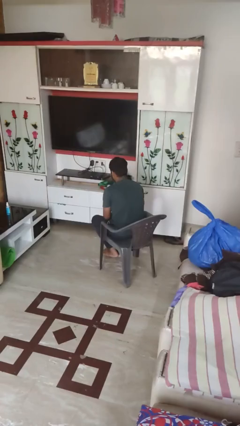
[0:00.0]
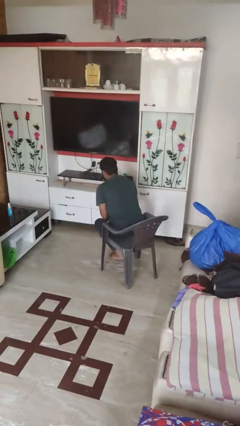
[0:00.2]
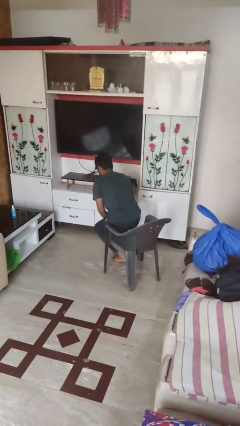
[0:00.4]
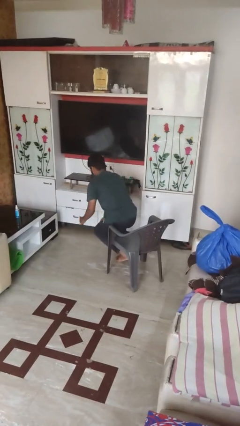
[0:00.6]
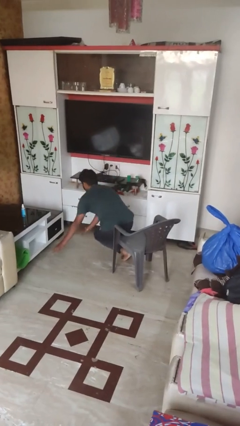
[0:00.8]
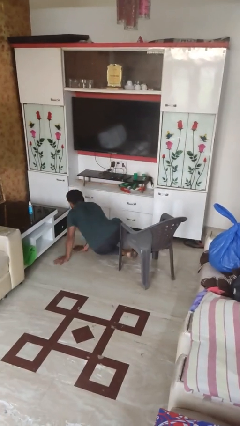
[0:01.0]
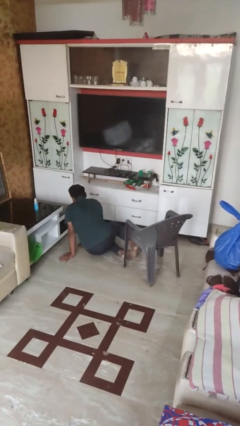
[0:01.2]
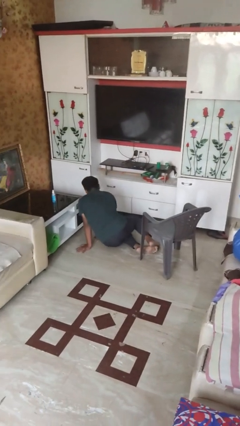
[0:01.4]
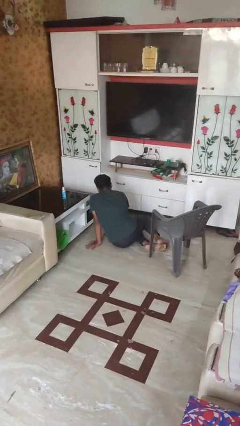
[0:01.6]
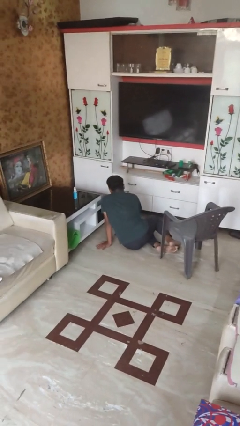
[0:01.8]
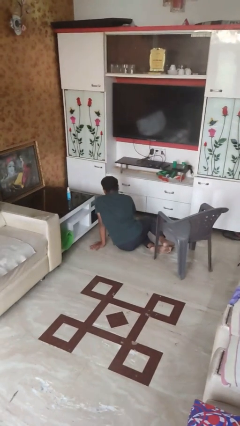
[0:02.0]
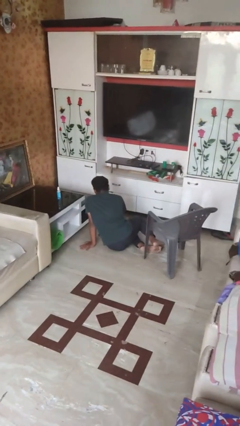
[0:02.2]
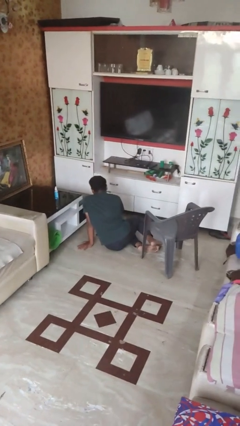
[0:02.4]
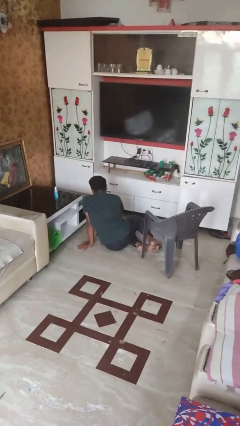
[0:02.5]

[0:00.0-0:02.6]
person falls from chair

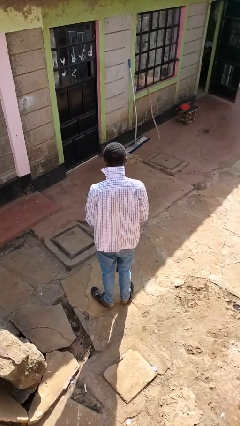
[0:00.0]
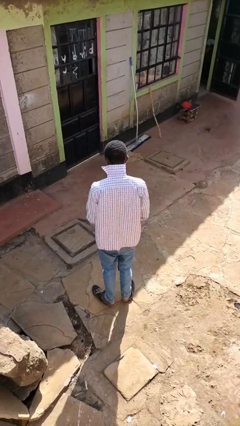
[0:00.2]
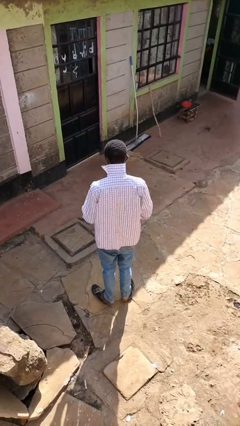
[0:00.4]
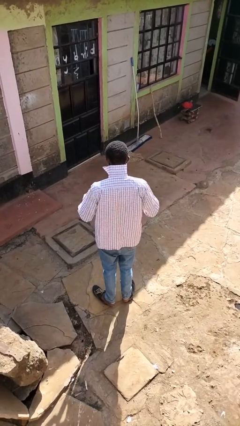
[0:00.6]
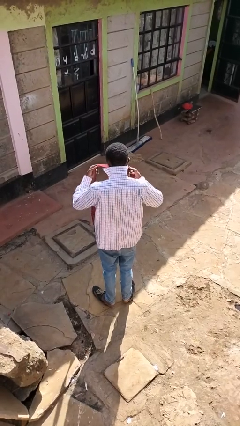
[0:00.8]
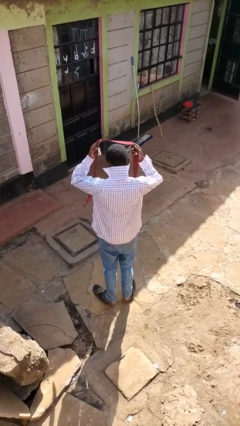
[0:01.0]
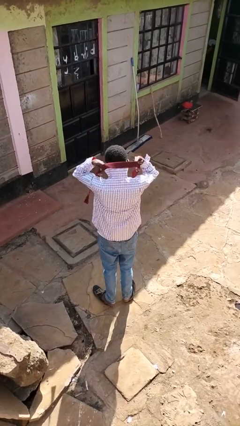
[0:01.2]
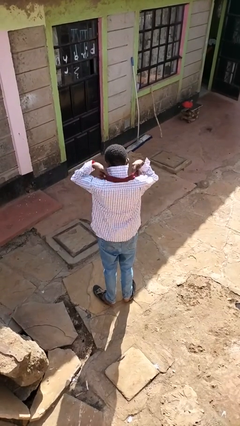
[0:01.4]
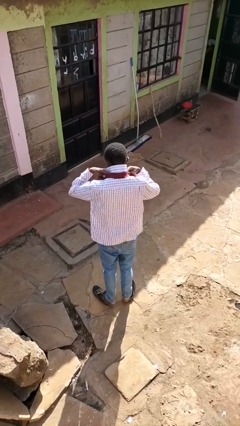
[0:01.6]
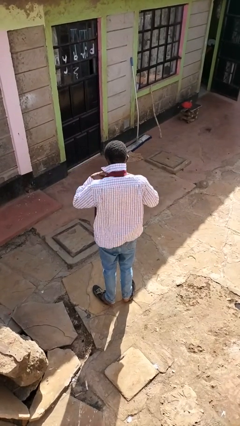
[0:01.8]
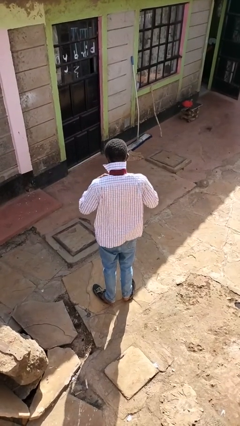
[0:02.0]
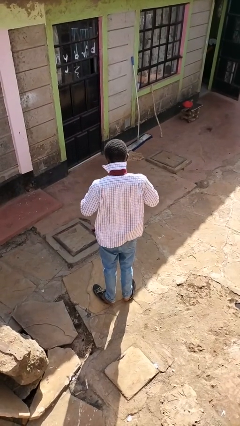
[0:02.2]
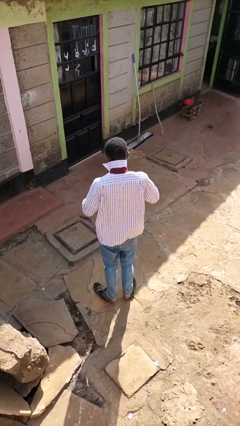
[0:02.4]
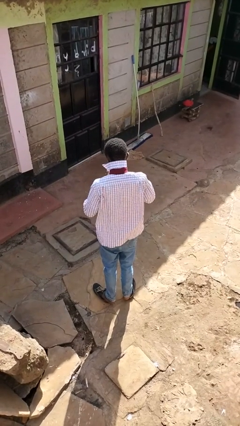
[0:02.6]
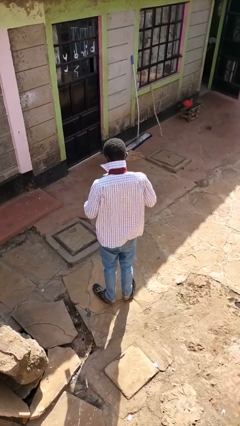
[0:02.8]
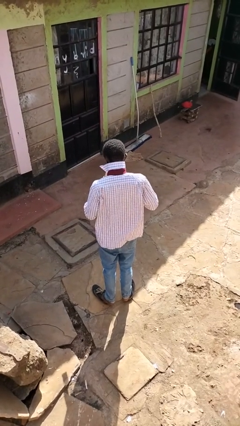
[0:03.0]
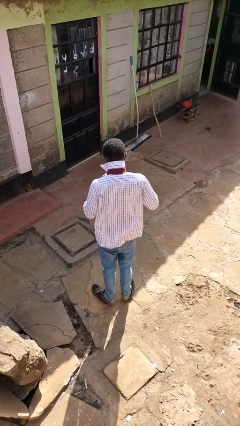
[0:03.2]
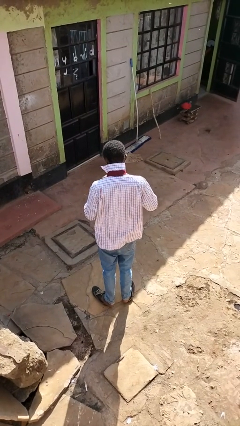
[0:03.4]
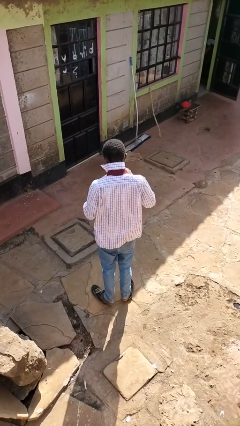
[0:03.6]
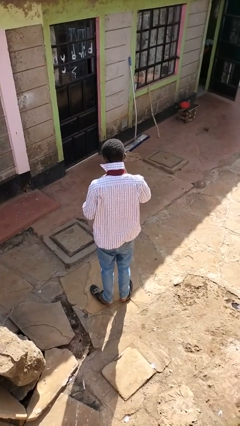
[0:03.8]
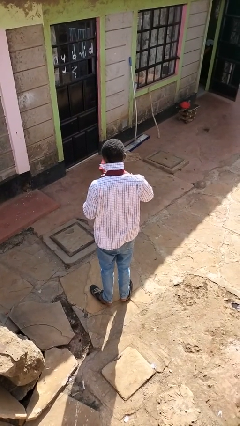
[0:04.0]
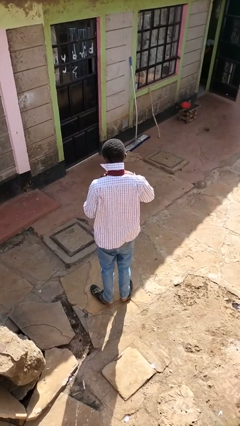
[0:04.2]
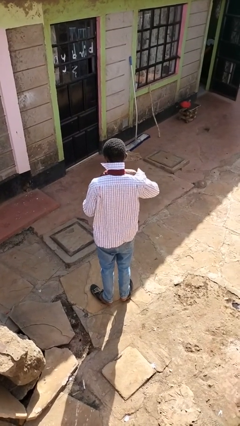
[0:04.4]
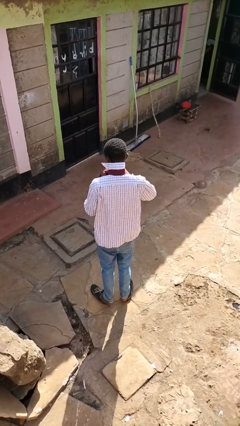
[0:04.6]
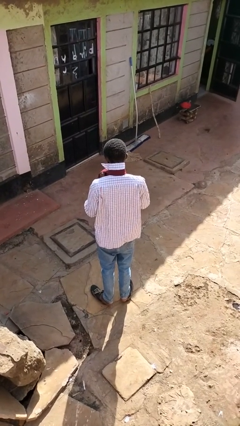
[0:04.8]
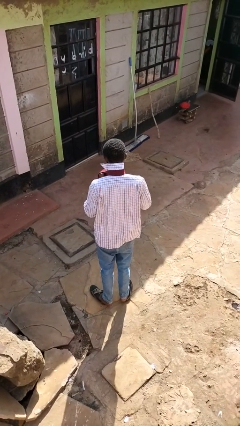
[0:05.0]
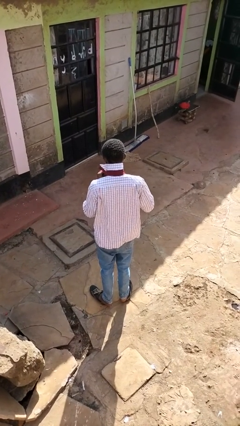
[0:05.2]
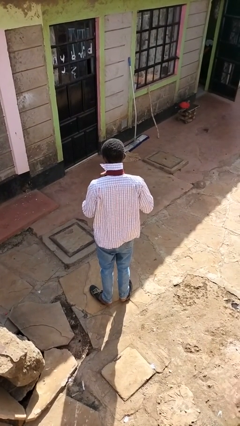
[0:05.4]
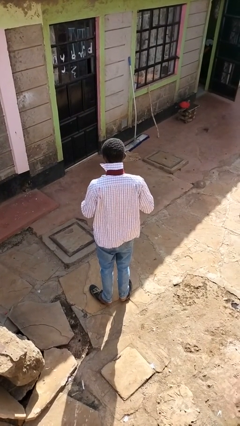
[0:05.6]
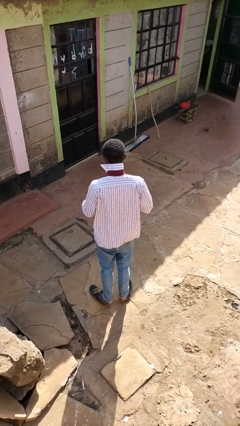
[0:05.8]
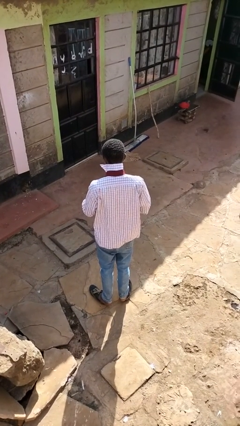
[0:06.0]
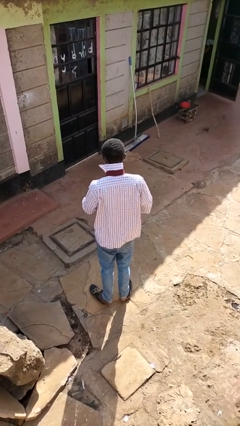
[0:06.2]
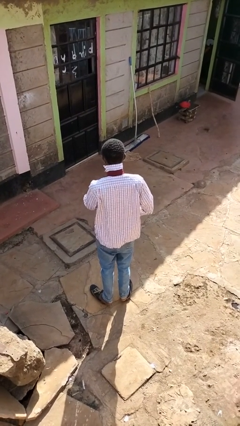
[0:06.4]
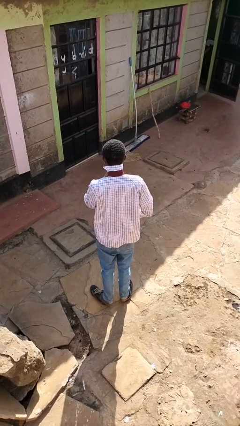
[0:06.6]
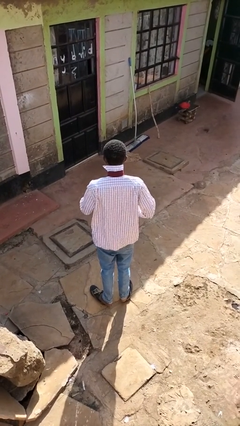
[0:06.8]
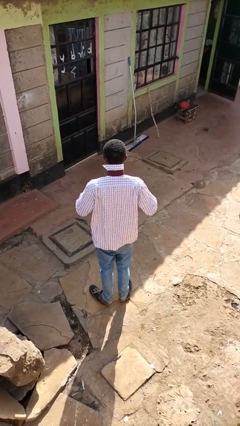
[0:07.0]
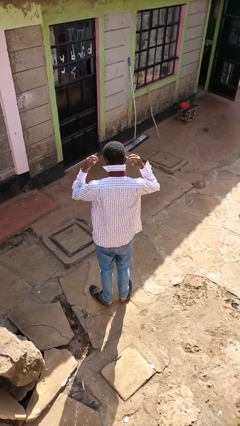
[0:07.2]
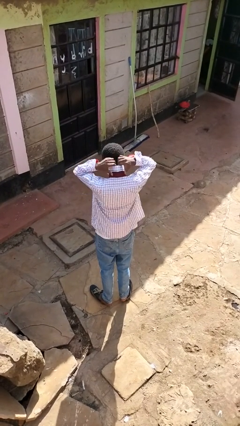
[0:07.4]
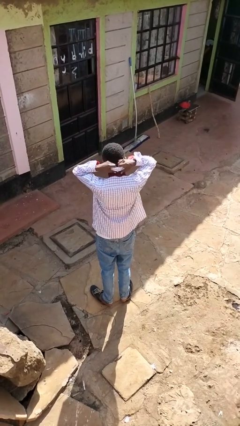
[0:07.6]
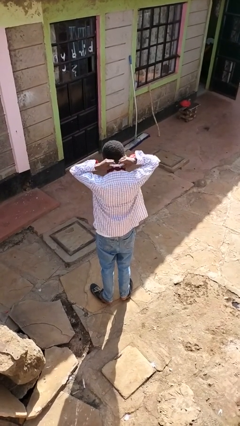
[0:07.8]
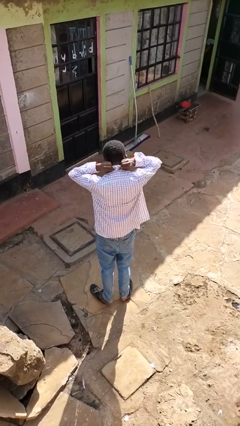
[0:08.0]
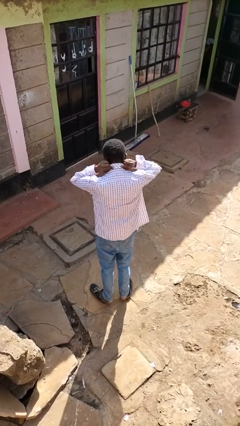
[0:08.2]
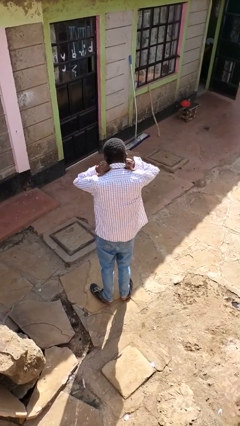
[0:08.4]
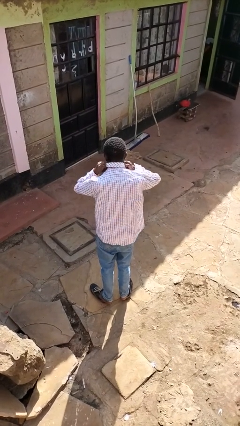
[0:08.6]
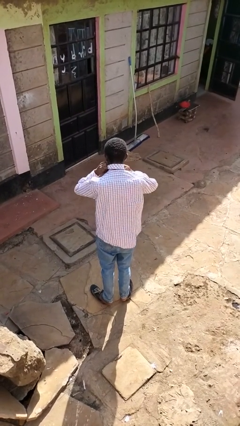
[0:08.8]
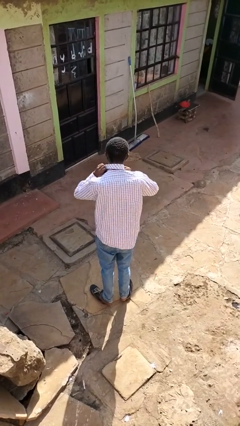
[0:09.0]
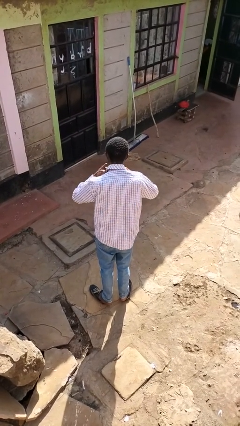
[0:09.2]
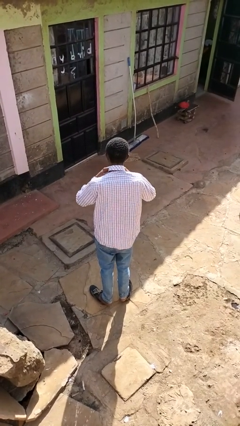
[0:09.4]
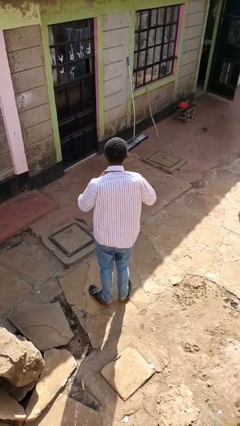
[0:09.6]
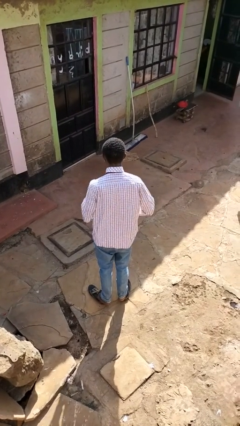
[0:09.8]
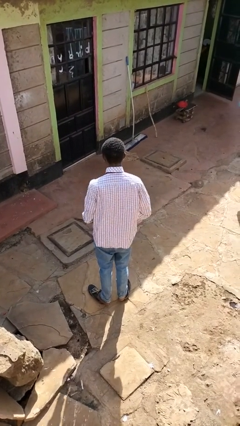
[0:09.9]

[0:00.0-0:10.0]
person puts on necktie

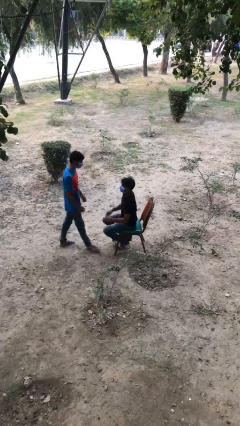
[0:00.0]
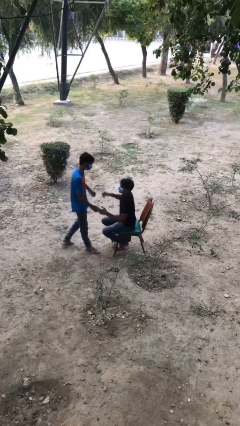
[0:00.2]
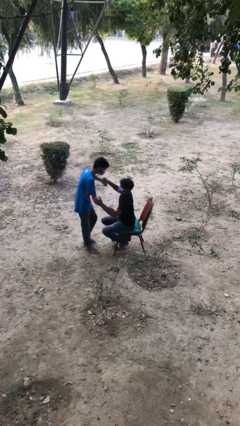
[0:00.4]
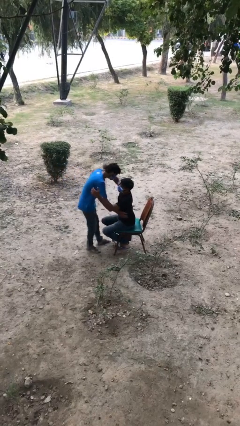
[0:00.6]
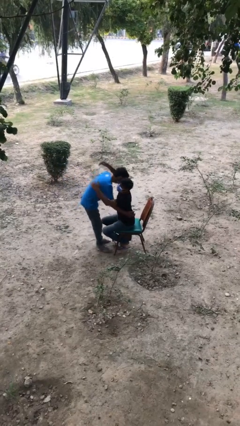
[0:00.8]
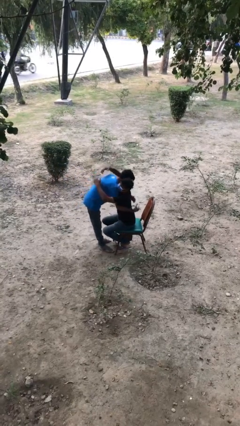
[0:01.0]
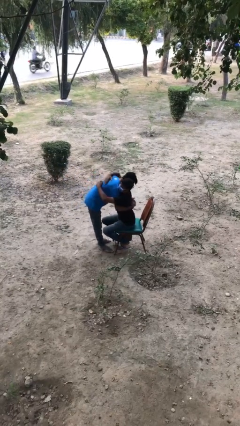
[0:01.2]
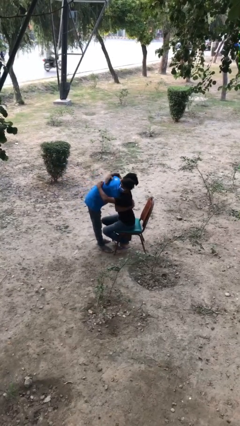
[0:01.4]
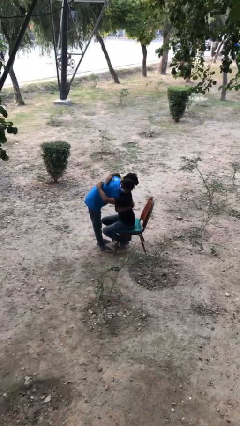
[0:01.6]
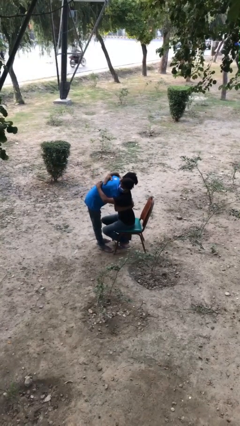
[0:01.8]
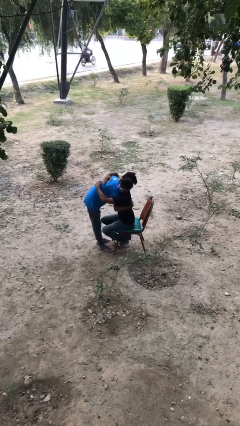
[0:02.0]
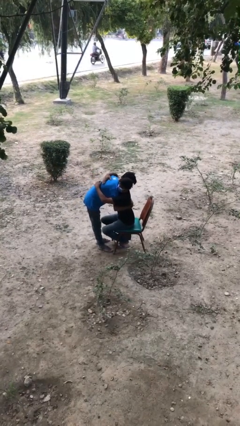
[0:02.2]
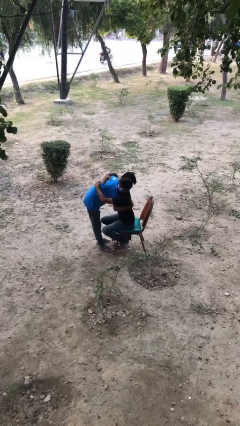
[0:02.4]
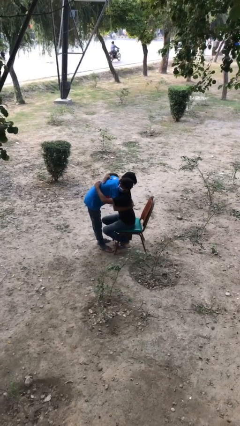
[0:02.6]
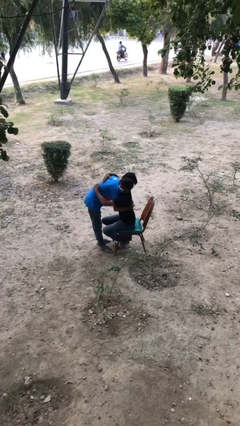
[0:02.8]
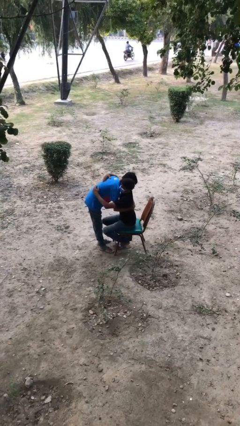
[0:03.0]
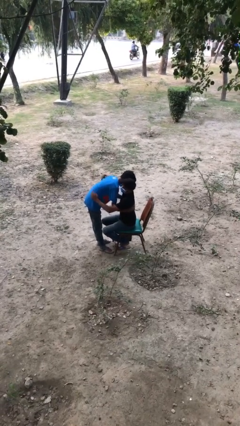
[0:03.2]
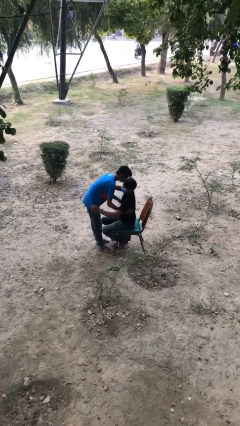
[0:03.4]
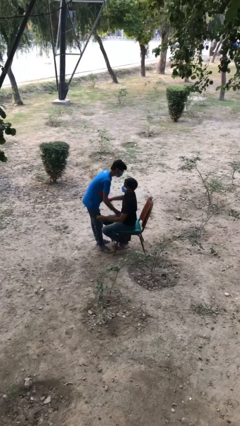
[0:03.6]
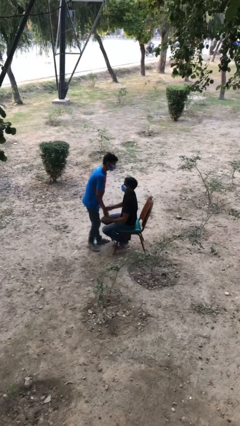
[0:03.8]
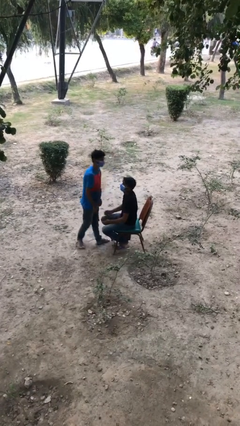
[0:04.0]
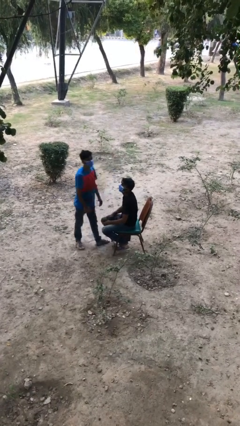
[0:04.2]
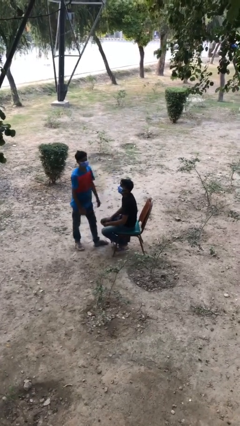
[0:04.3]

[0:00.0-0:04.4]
person embraces person

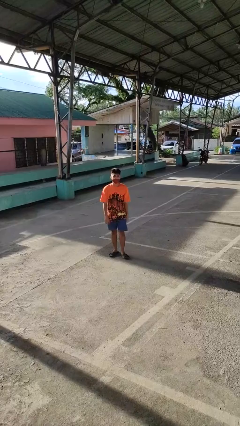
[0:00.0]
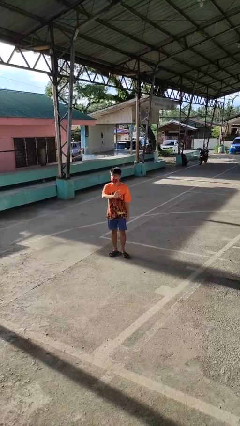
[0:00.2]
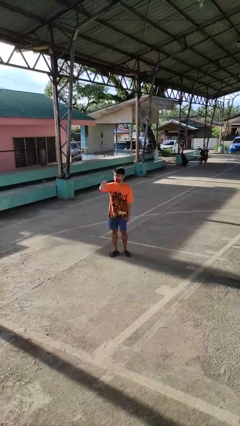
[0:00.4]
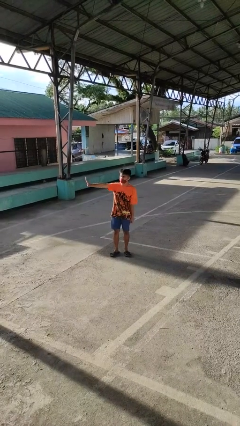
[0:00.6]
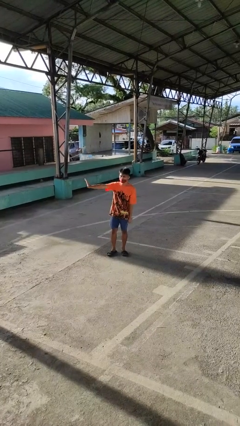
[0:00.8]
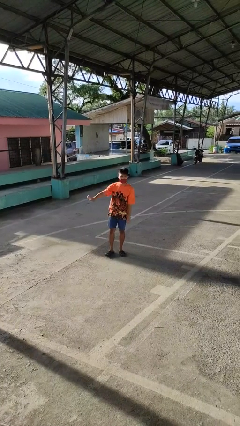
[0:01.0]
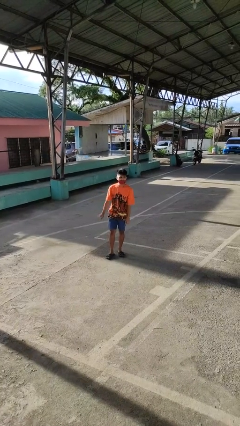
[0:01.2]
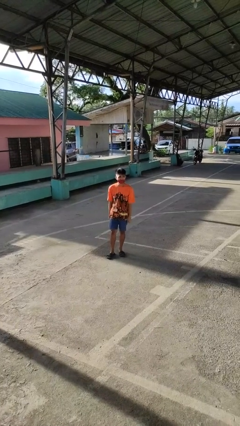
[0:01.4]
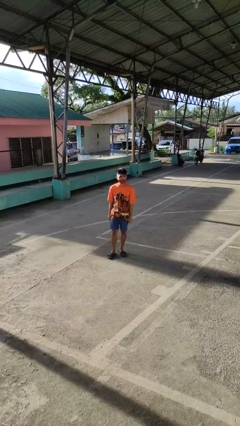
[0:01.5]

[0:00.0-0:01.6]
person gestures swipe right
